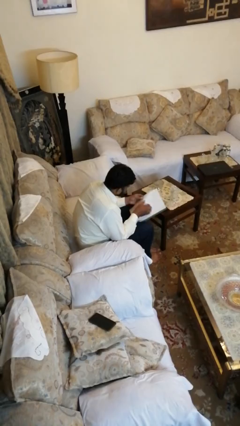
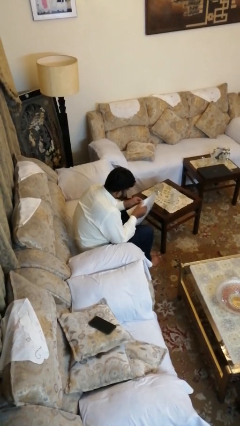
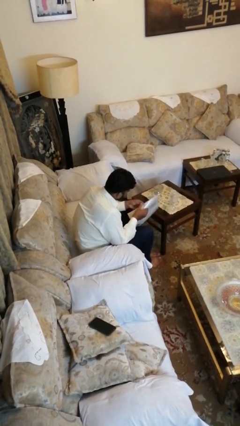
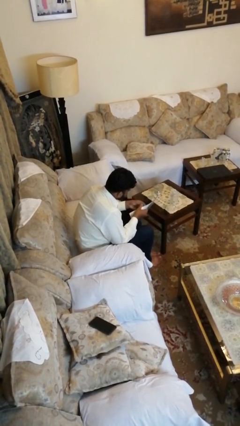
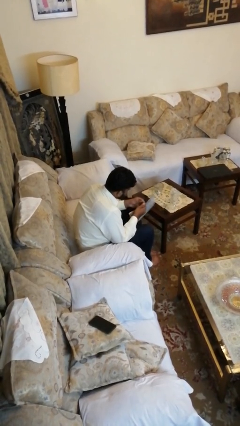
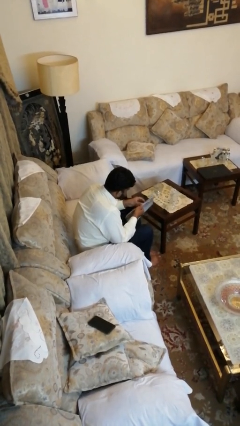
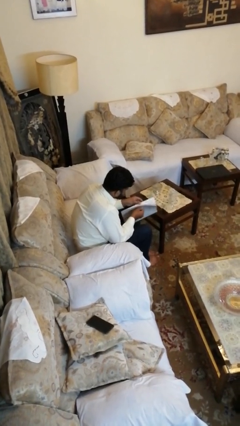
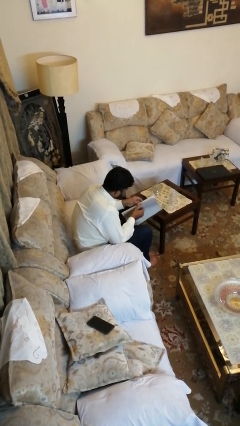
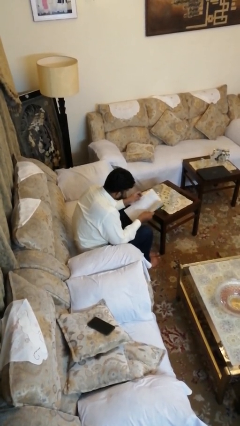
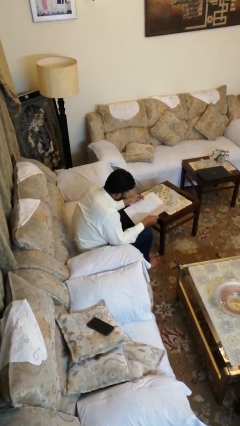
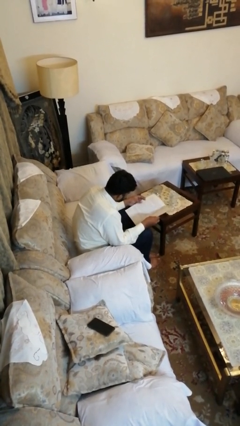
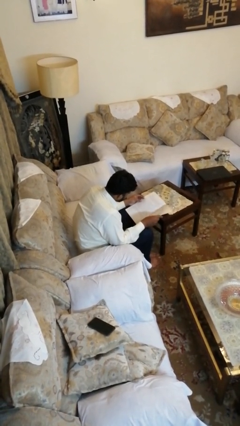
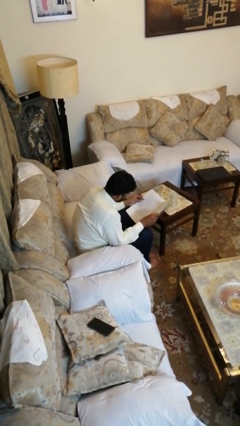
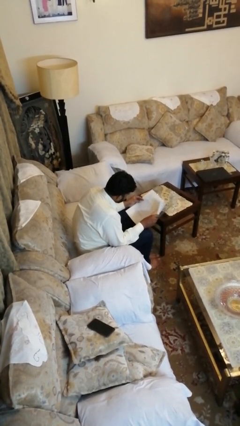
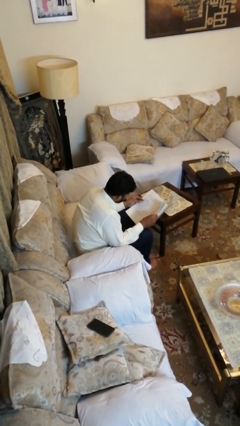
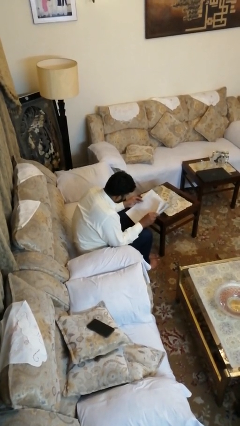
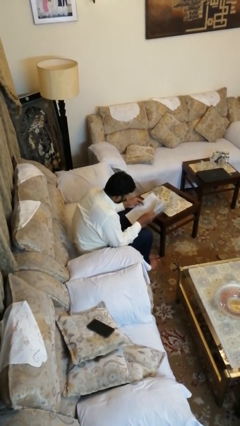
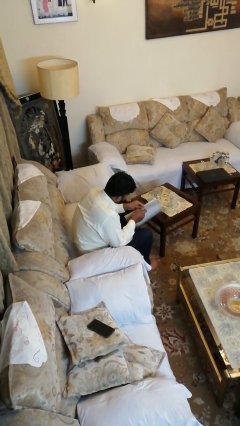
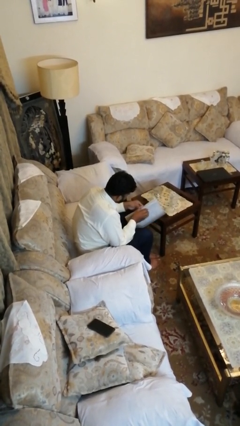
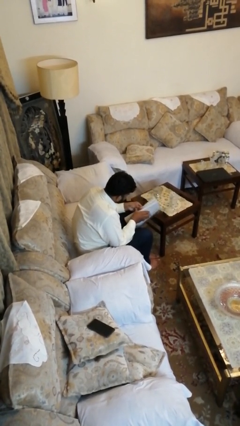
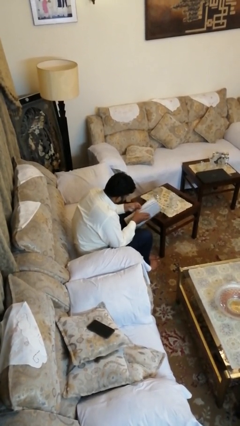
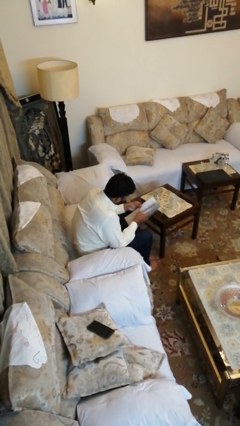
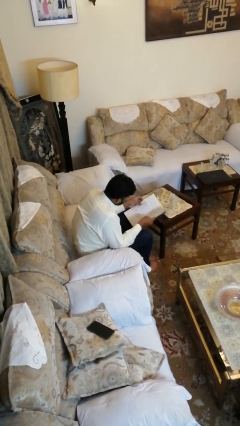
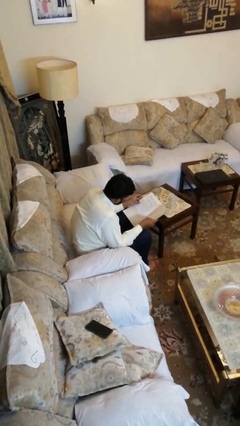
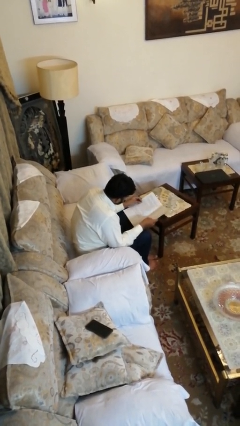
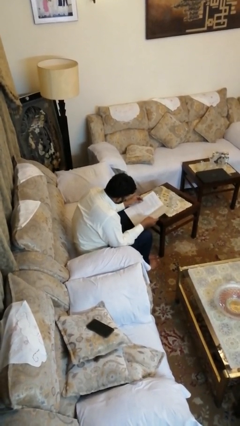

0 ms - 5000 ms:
person reads magazine

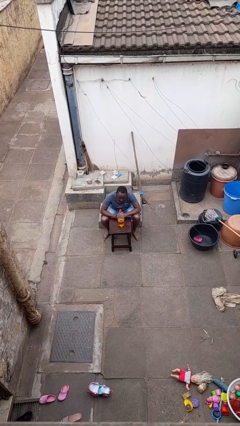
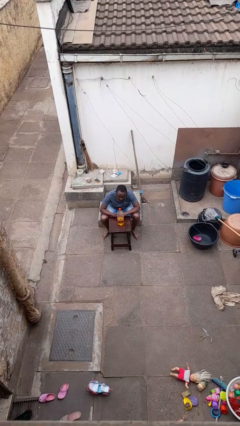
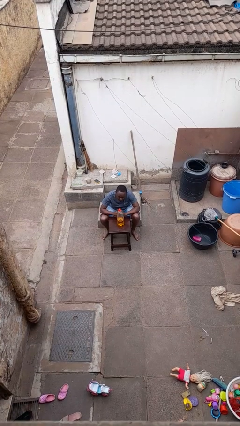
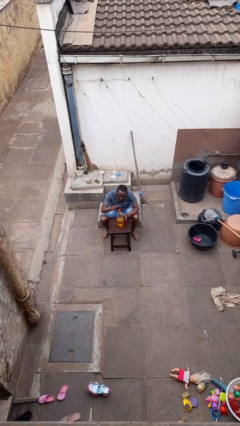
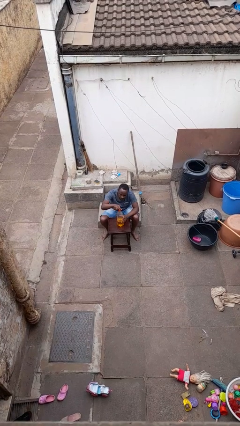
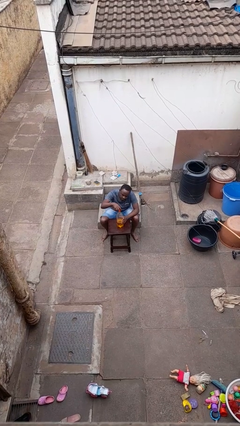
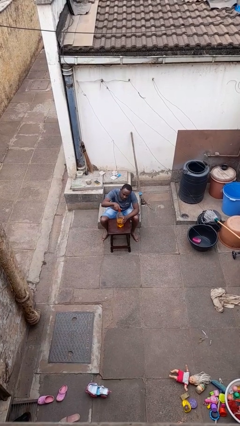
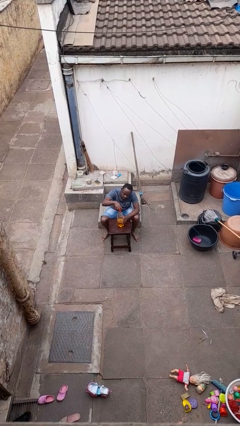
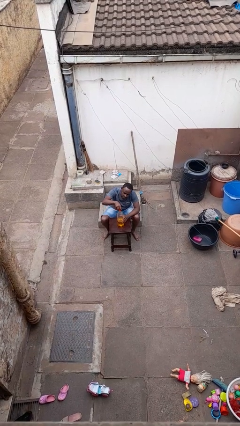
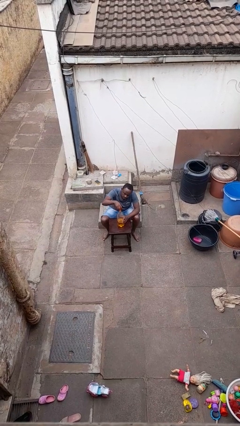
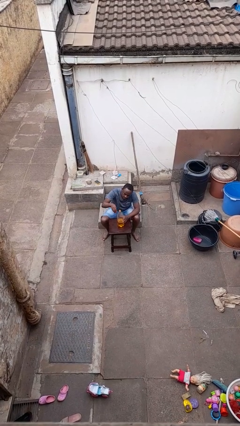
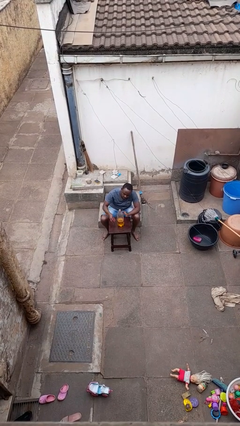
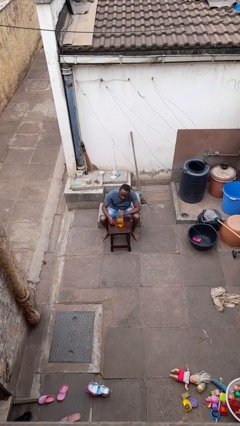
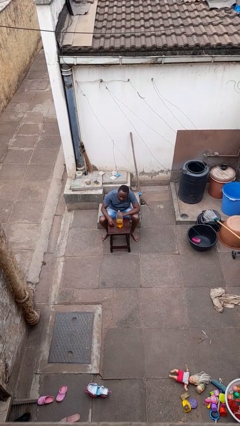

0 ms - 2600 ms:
person unscrews lid from bottle

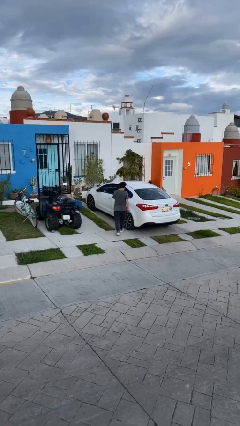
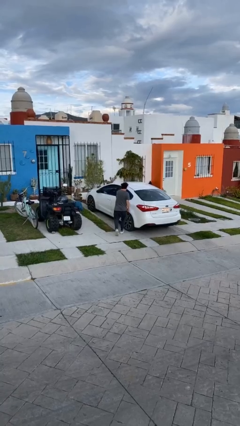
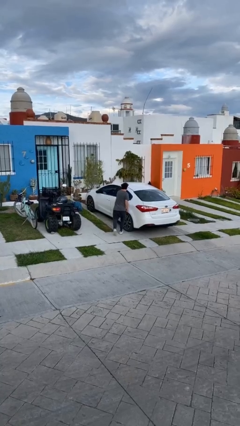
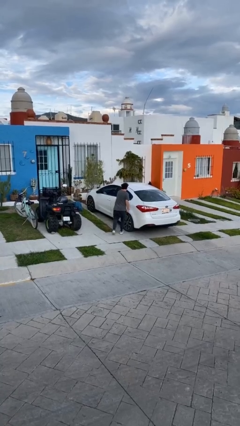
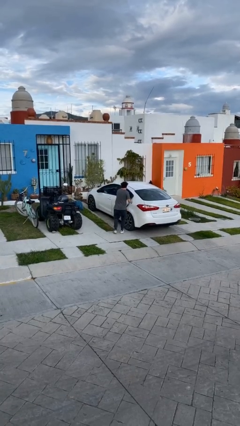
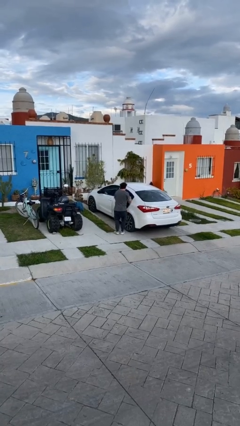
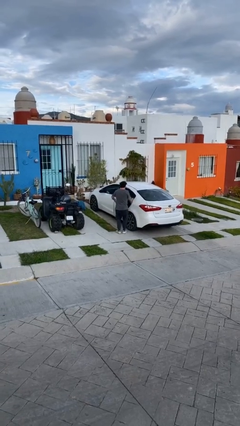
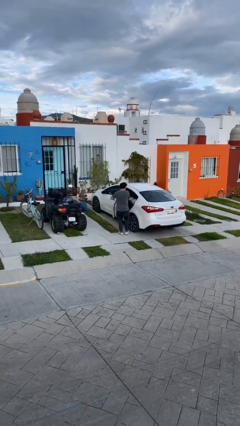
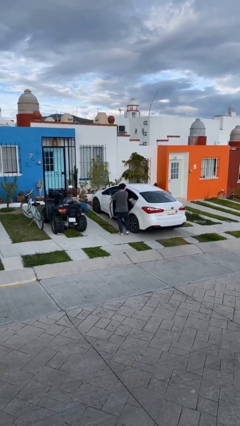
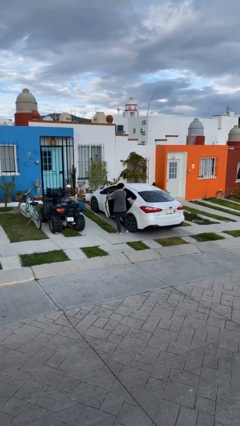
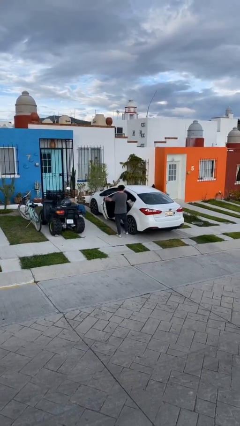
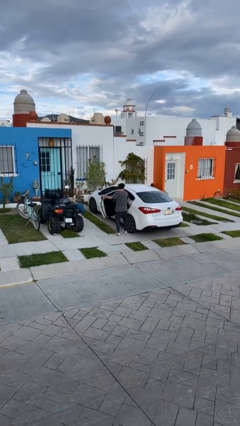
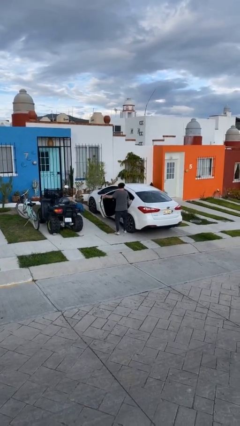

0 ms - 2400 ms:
person opens car door

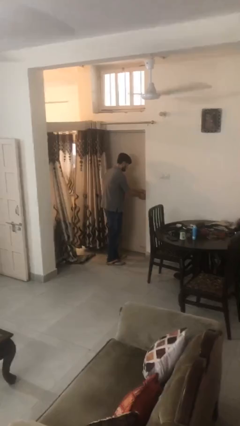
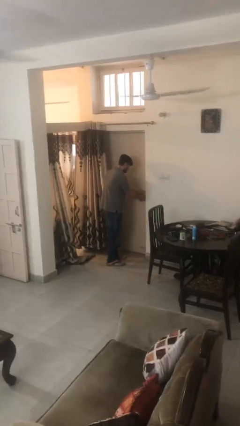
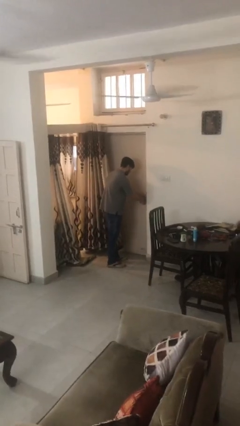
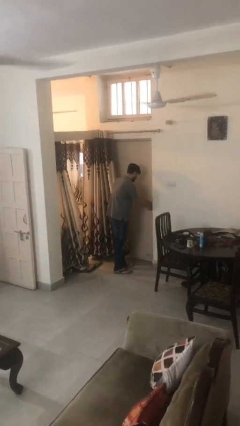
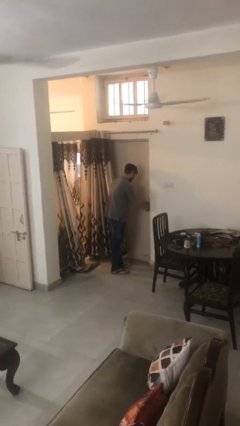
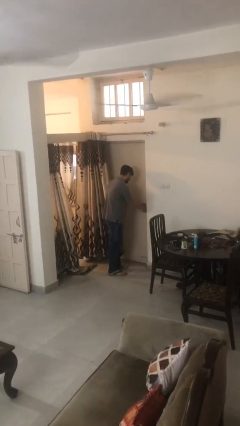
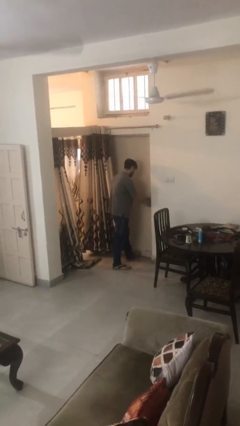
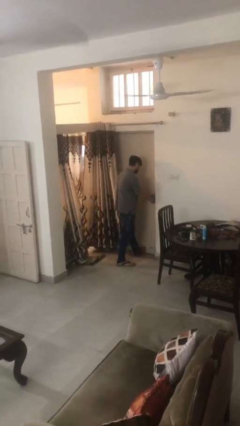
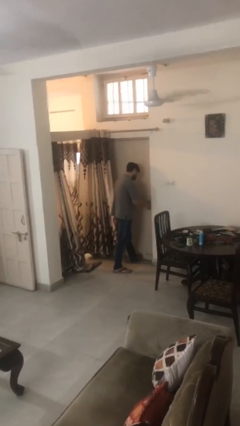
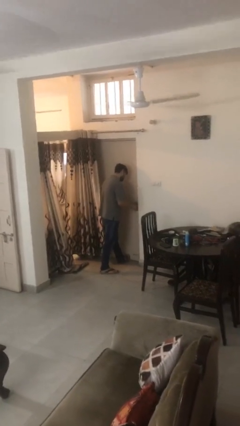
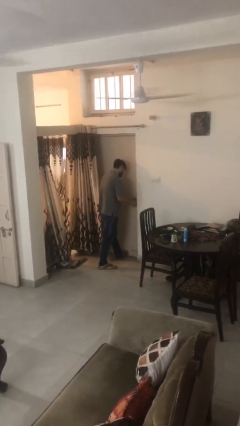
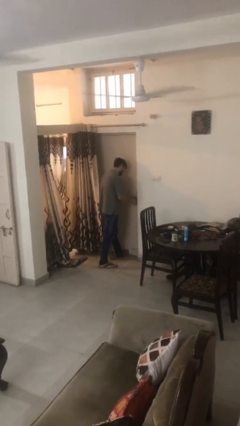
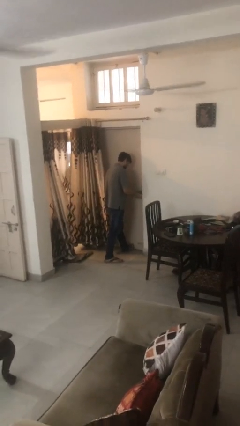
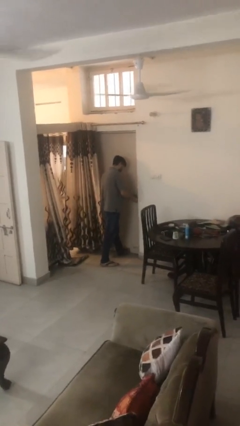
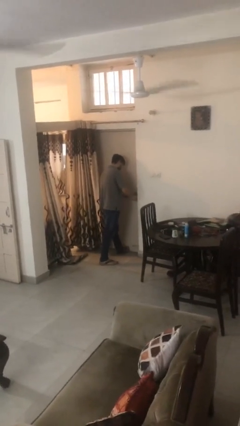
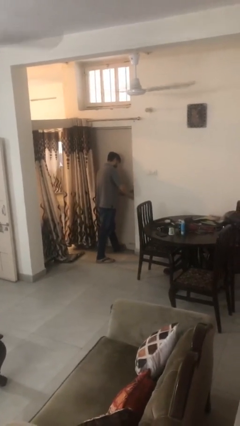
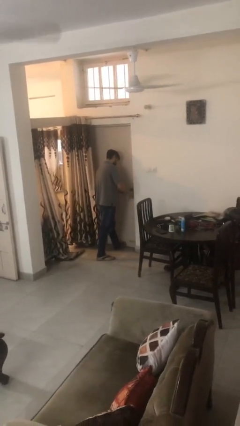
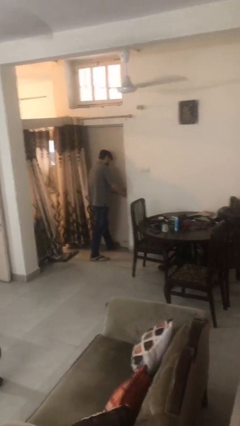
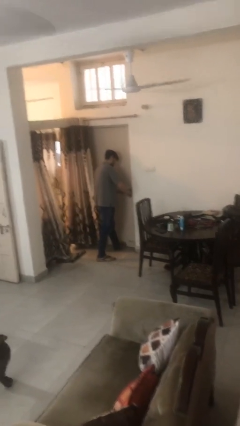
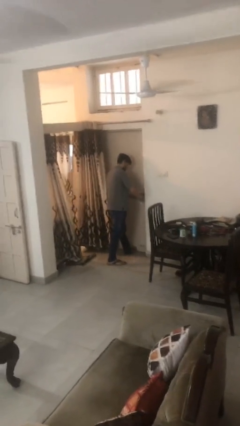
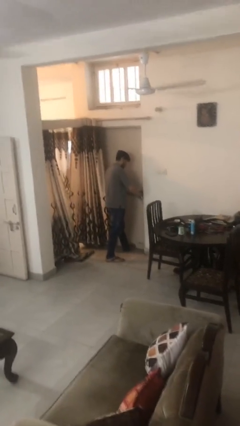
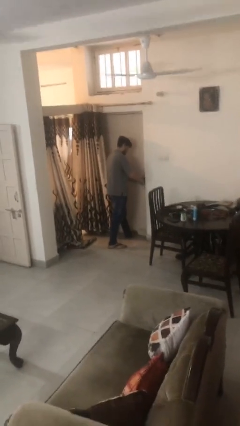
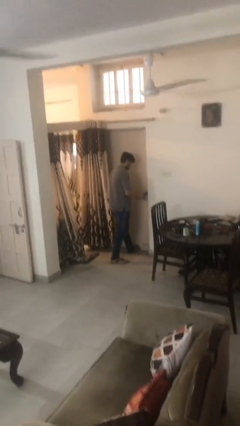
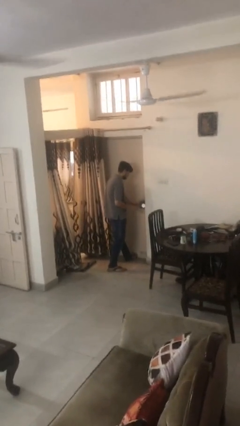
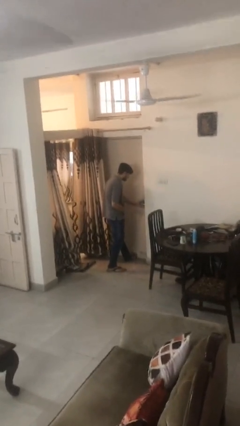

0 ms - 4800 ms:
person locks door with keys

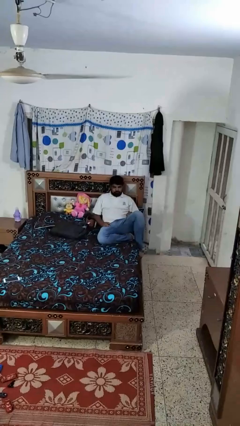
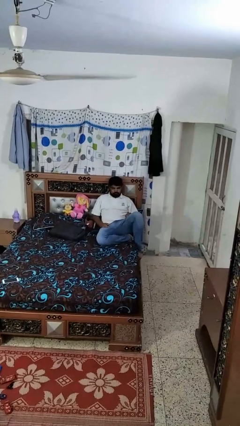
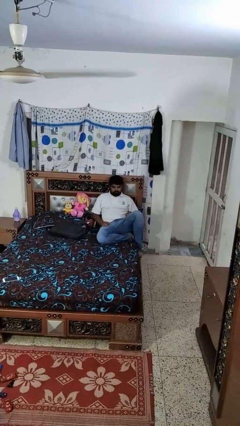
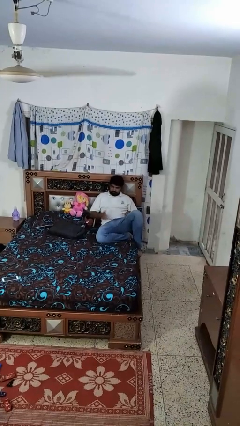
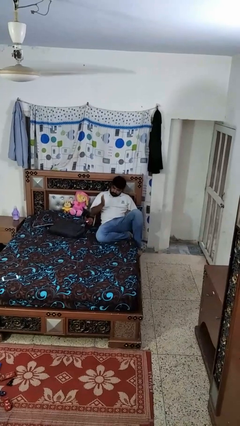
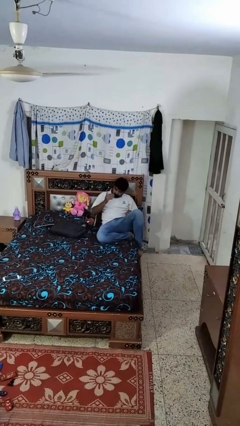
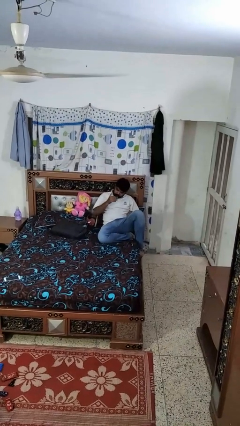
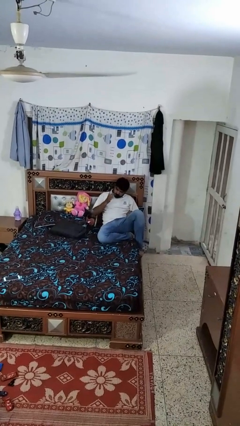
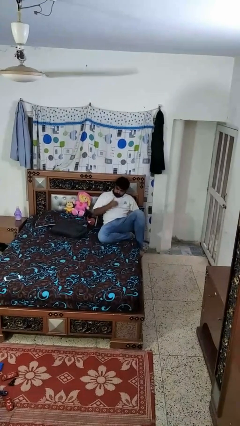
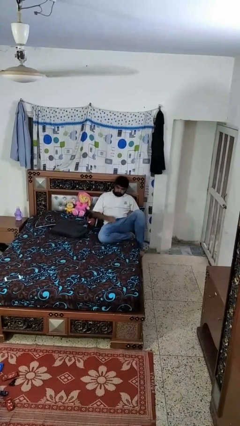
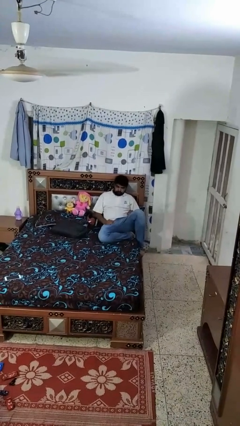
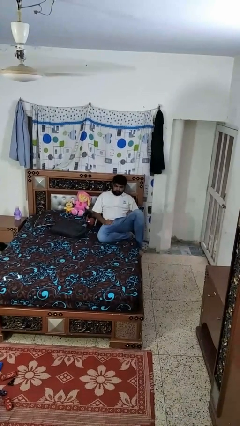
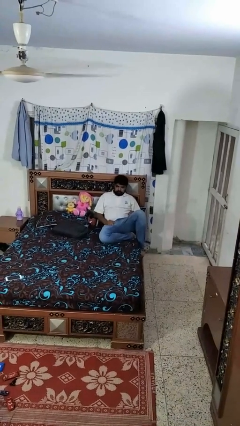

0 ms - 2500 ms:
person gestures come here

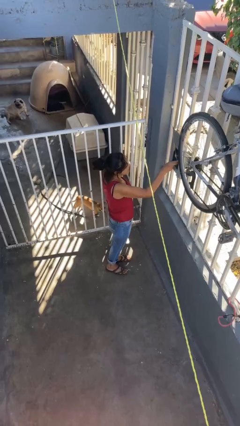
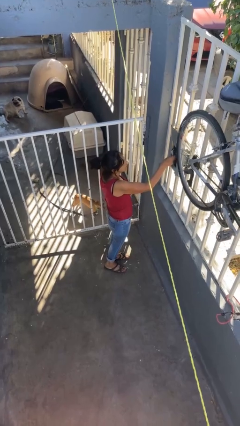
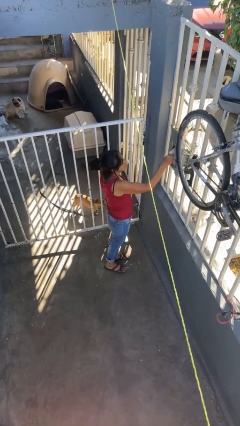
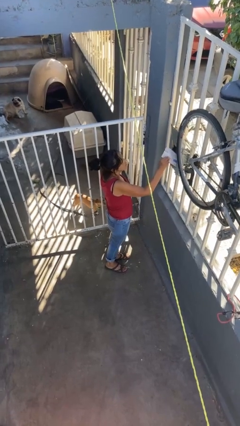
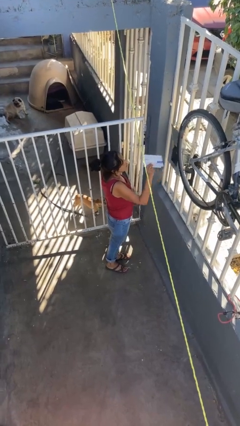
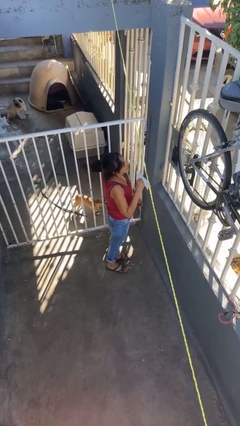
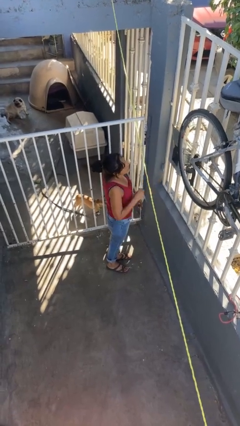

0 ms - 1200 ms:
person takes letters from mailbox
